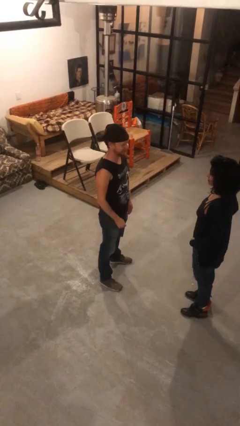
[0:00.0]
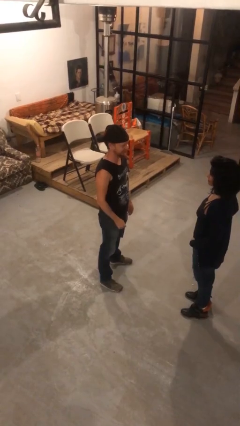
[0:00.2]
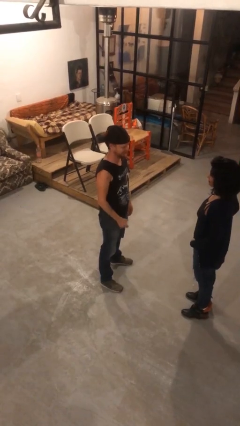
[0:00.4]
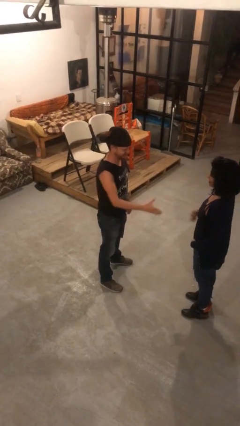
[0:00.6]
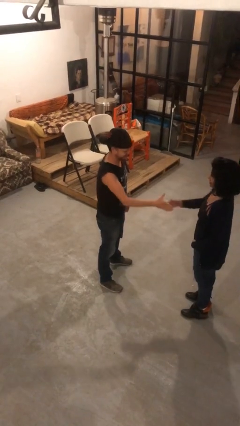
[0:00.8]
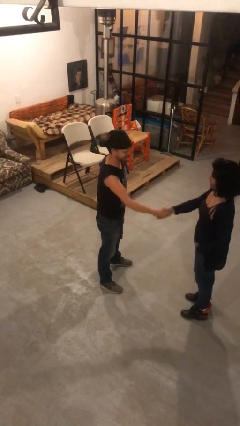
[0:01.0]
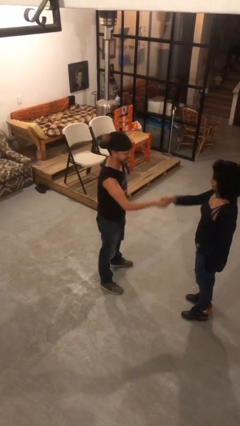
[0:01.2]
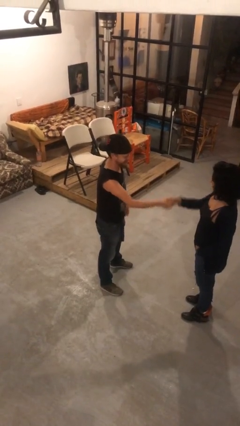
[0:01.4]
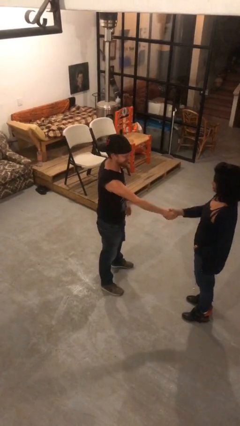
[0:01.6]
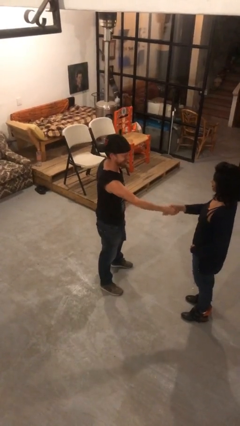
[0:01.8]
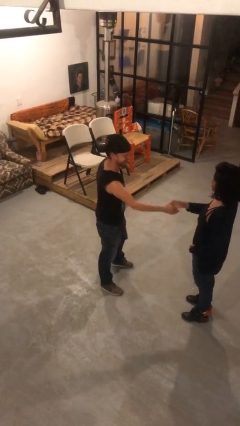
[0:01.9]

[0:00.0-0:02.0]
person shakes hand

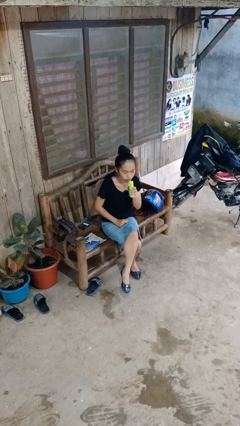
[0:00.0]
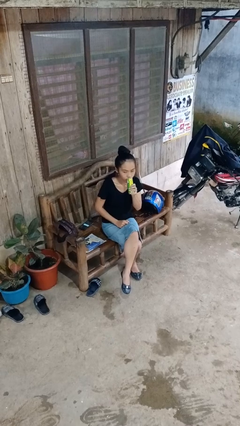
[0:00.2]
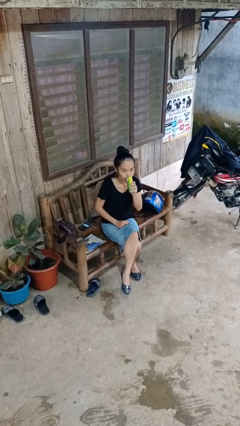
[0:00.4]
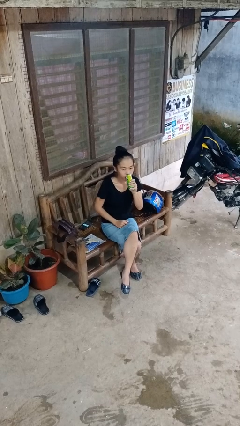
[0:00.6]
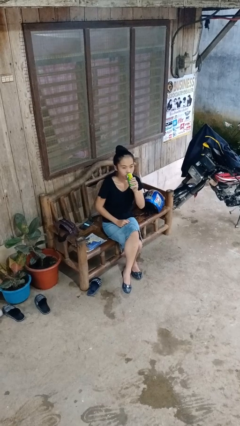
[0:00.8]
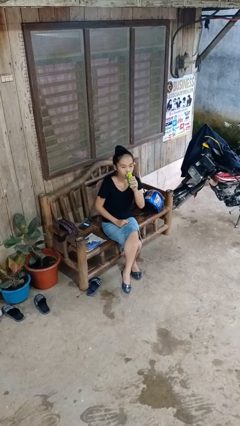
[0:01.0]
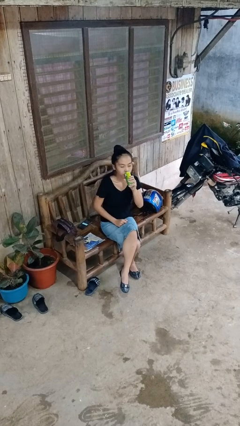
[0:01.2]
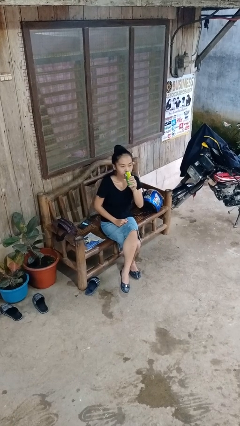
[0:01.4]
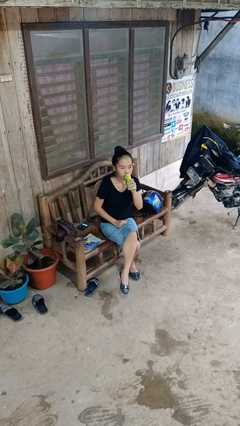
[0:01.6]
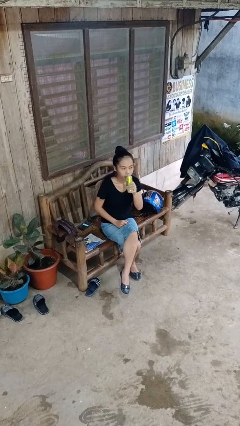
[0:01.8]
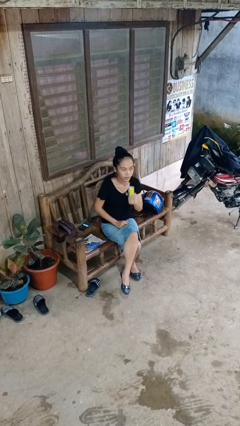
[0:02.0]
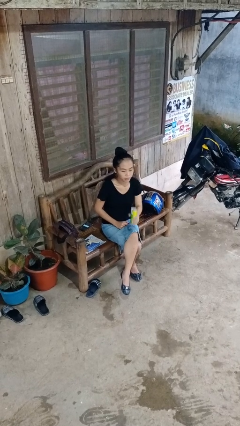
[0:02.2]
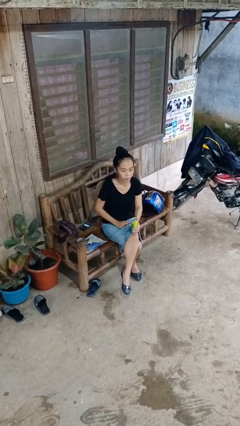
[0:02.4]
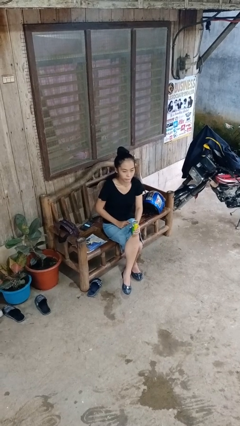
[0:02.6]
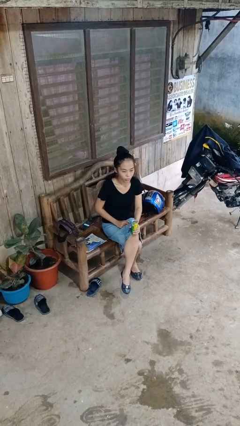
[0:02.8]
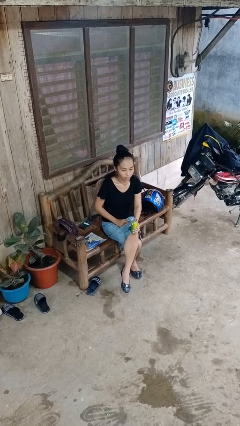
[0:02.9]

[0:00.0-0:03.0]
person drinks from beverage can

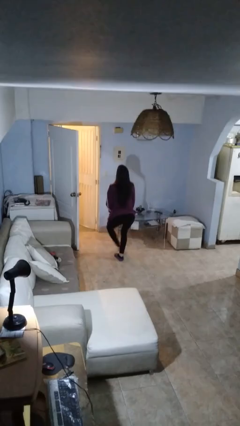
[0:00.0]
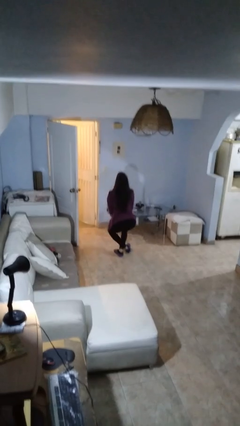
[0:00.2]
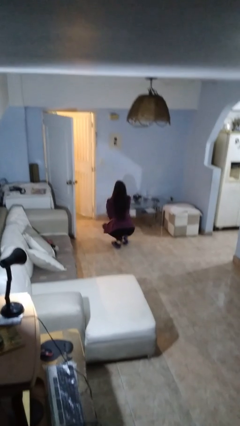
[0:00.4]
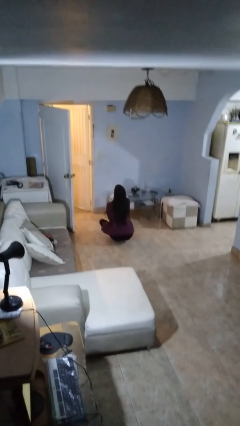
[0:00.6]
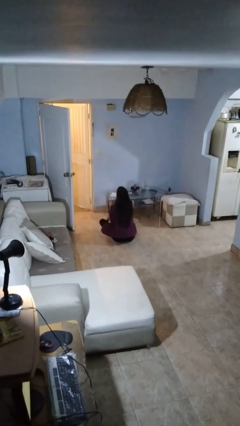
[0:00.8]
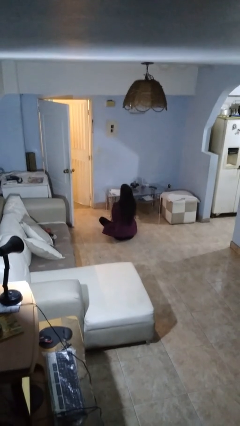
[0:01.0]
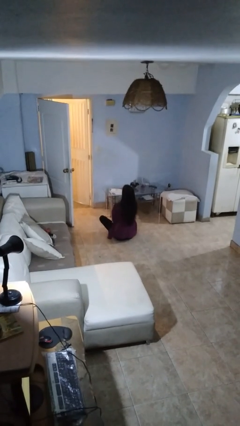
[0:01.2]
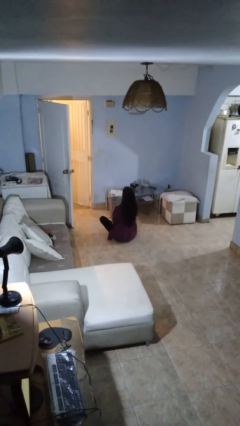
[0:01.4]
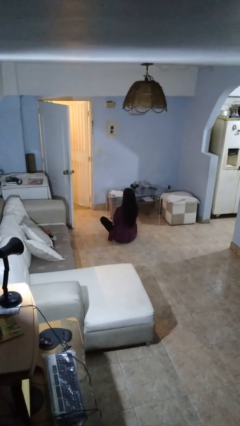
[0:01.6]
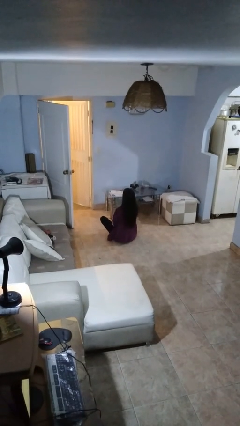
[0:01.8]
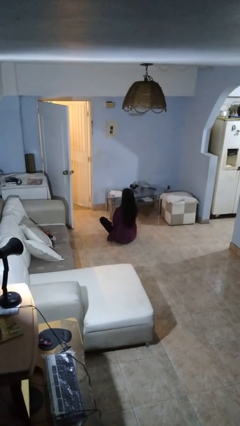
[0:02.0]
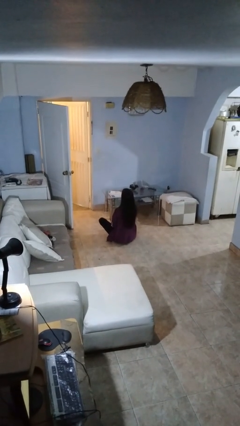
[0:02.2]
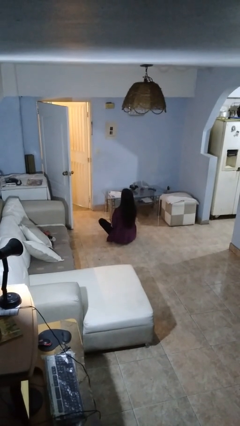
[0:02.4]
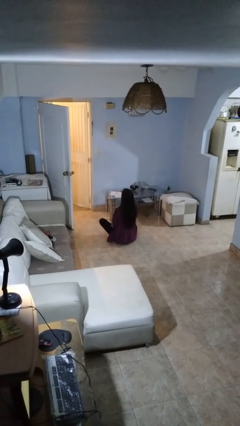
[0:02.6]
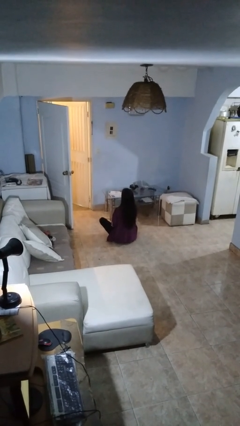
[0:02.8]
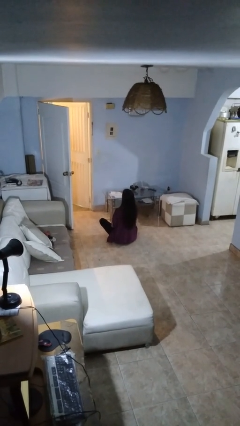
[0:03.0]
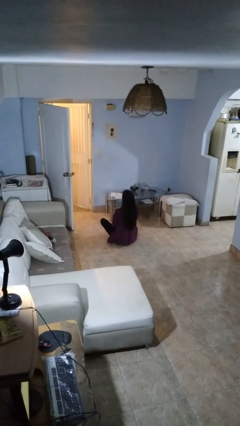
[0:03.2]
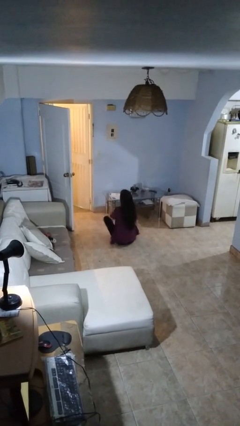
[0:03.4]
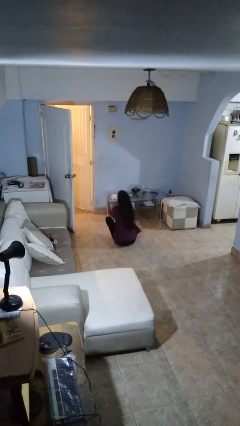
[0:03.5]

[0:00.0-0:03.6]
person sits crisscross

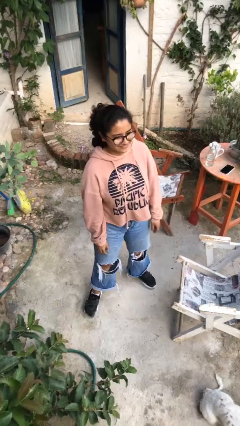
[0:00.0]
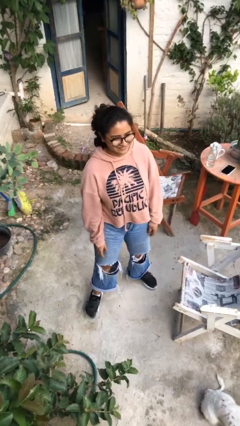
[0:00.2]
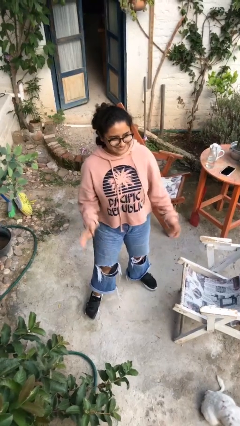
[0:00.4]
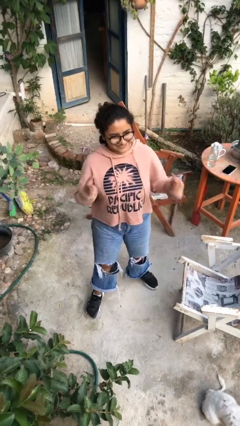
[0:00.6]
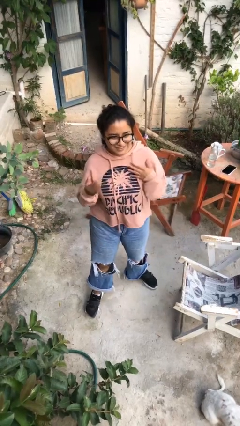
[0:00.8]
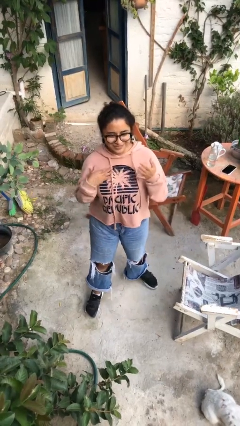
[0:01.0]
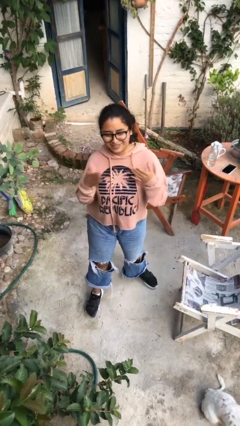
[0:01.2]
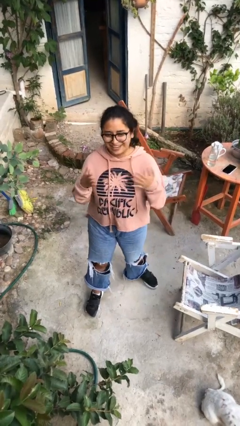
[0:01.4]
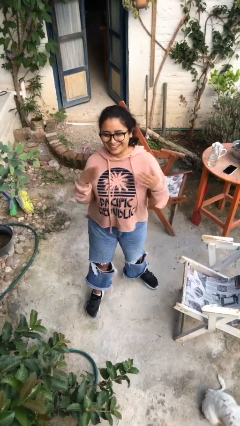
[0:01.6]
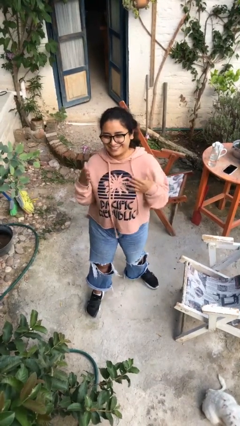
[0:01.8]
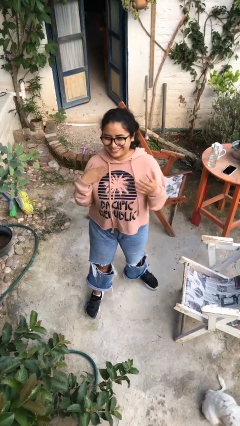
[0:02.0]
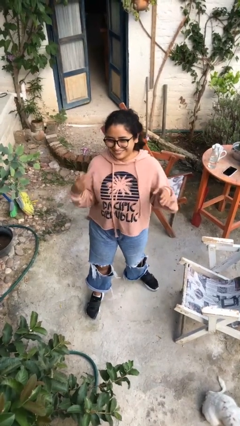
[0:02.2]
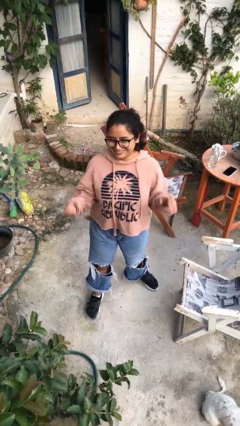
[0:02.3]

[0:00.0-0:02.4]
person drums on chest

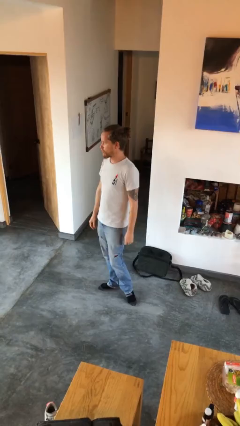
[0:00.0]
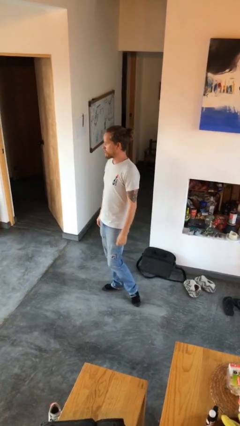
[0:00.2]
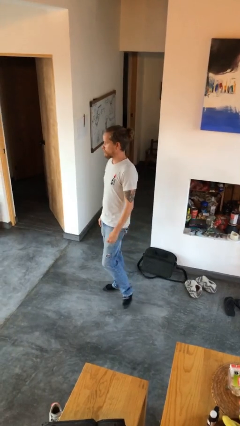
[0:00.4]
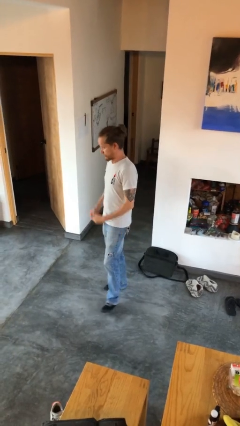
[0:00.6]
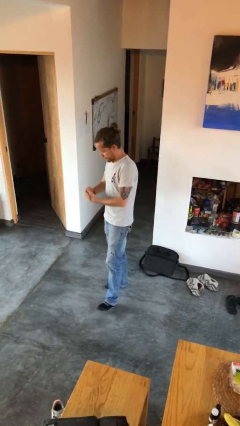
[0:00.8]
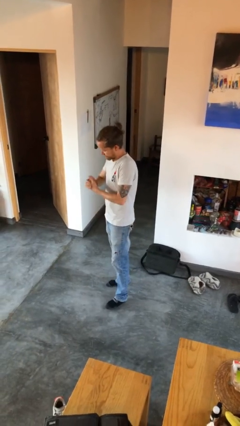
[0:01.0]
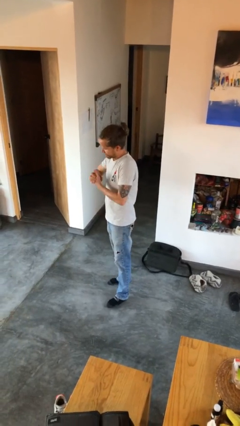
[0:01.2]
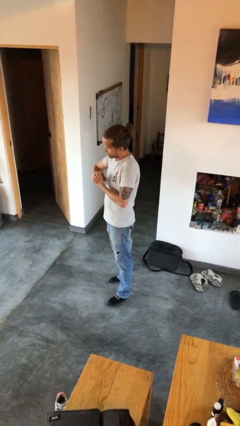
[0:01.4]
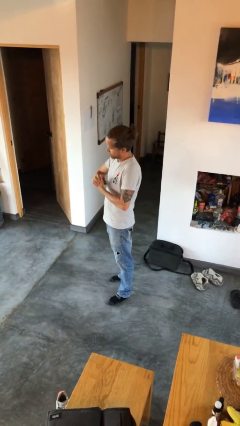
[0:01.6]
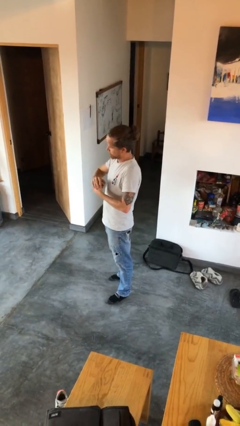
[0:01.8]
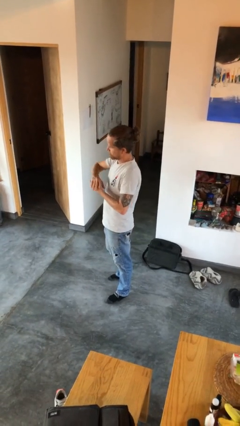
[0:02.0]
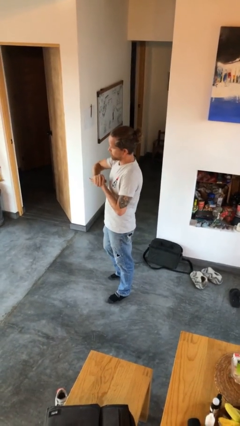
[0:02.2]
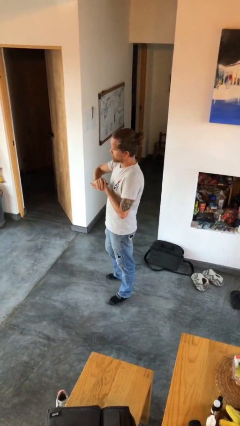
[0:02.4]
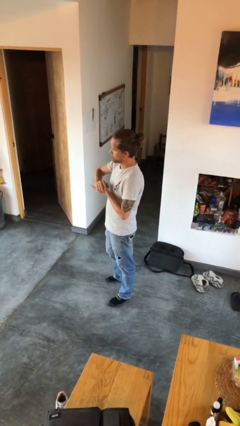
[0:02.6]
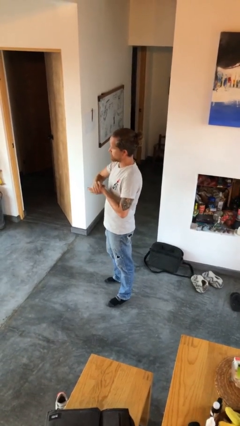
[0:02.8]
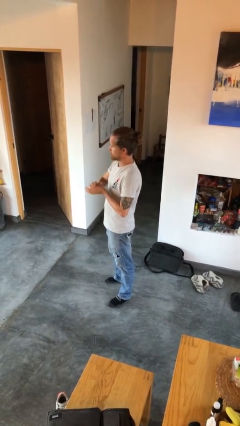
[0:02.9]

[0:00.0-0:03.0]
person cracks knuckles

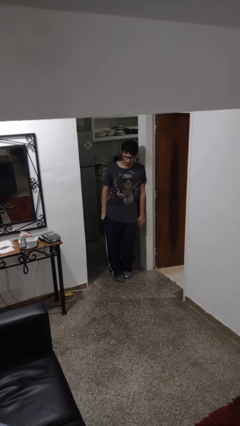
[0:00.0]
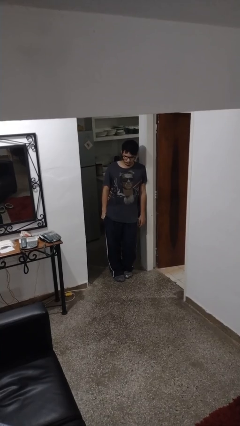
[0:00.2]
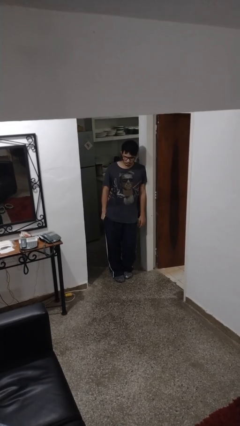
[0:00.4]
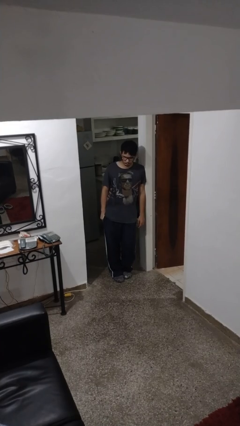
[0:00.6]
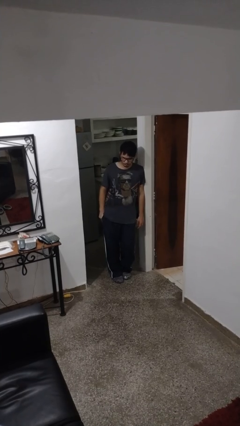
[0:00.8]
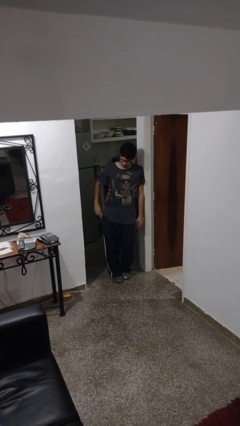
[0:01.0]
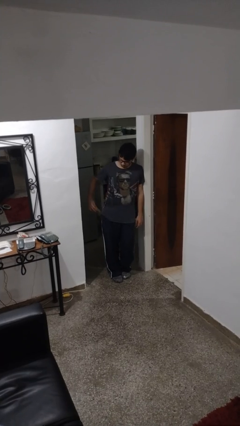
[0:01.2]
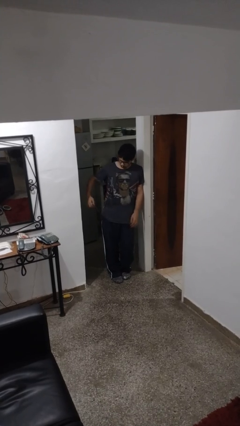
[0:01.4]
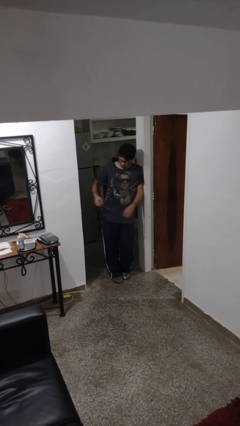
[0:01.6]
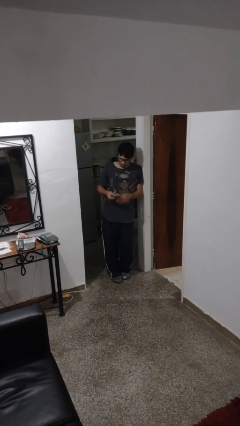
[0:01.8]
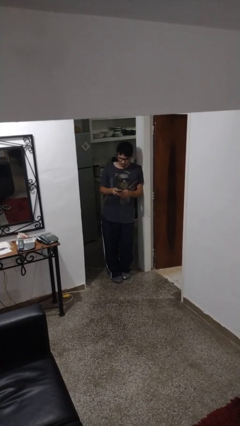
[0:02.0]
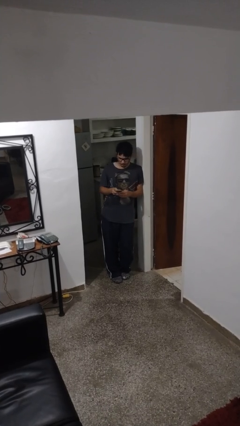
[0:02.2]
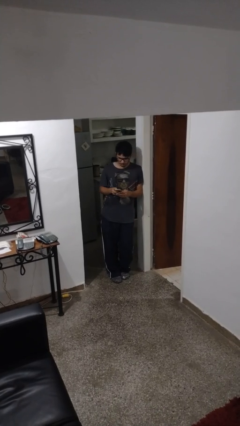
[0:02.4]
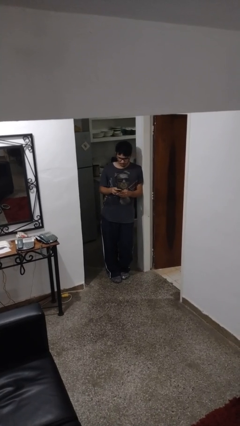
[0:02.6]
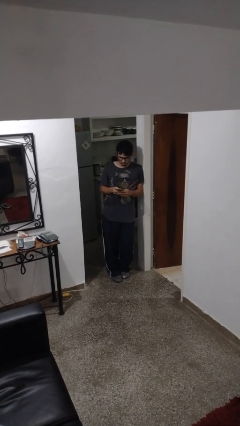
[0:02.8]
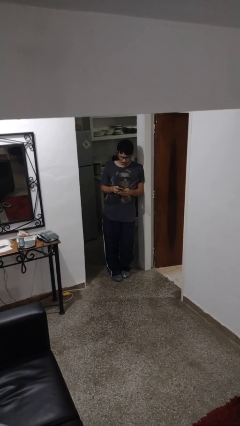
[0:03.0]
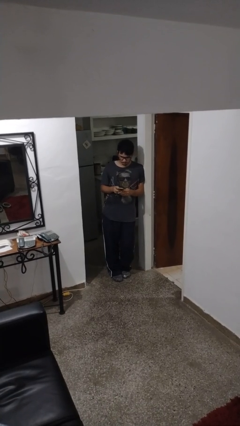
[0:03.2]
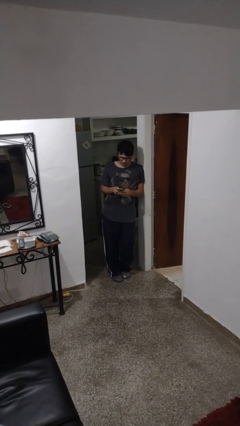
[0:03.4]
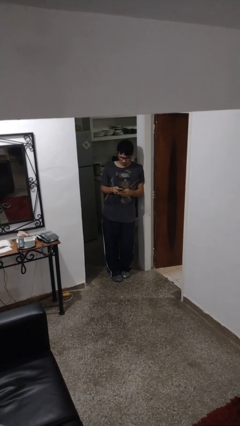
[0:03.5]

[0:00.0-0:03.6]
person takes phone from pocket
